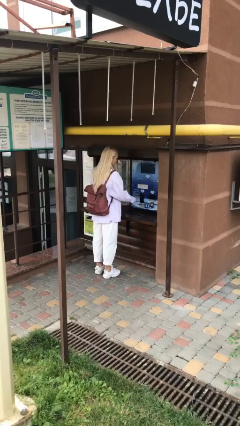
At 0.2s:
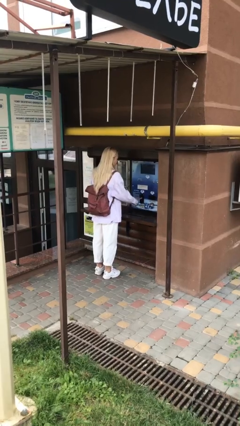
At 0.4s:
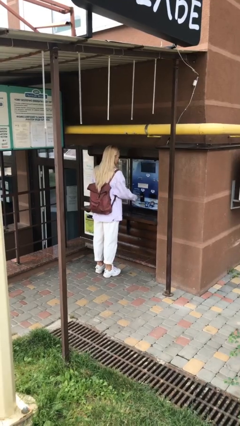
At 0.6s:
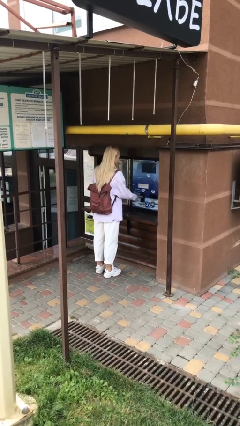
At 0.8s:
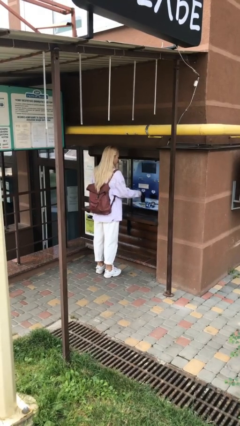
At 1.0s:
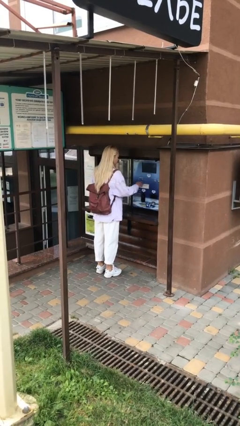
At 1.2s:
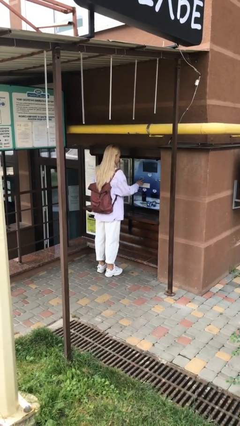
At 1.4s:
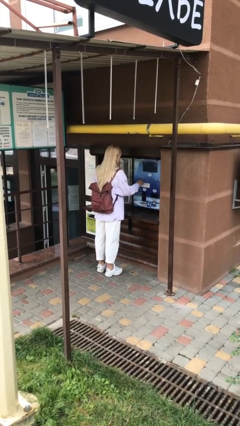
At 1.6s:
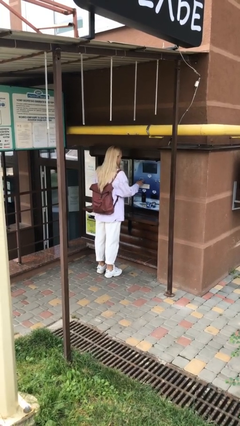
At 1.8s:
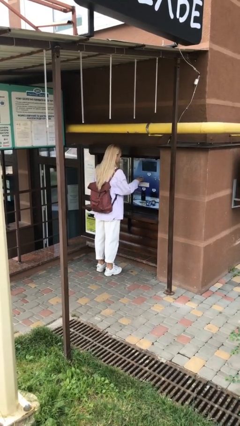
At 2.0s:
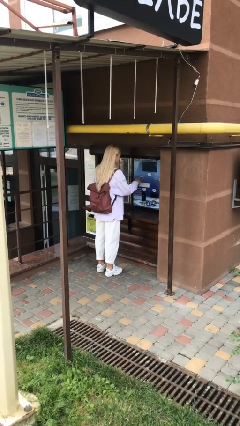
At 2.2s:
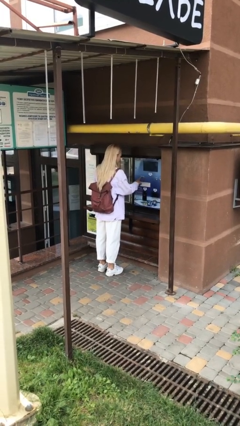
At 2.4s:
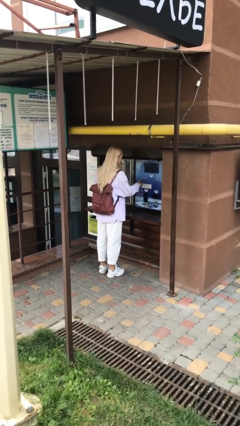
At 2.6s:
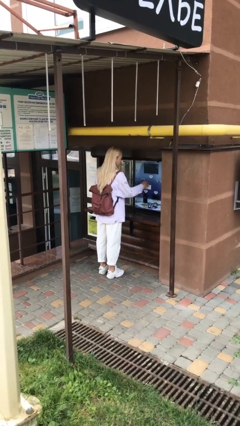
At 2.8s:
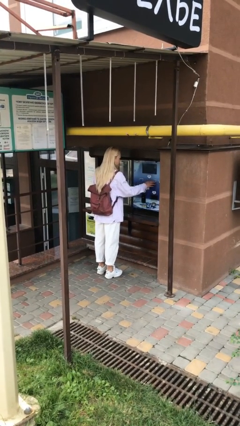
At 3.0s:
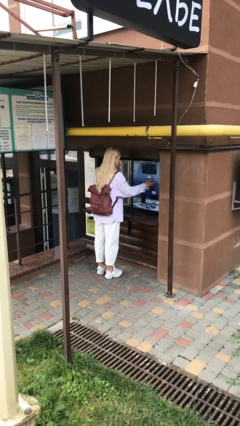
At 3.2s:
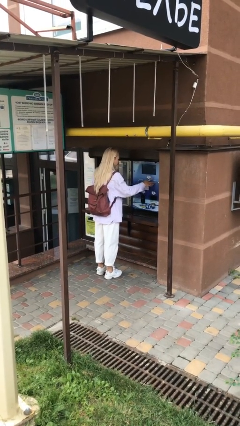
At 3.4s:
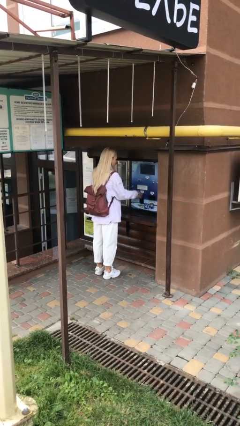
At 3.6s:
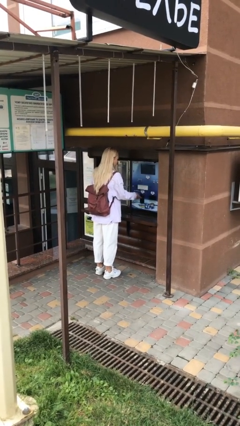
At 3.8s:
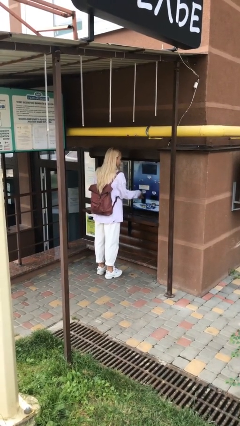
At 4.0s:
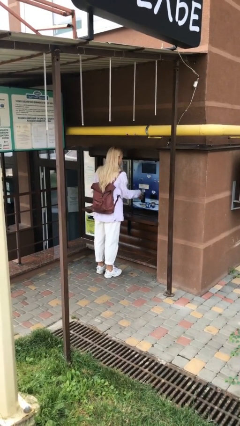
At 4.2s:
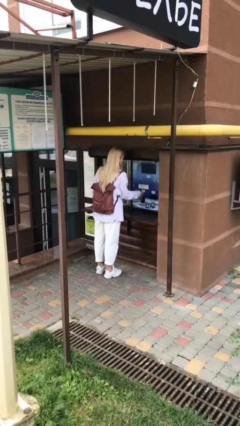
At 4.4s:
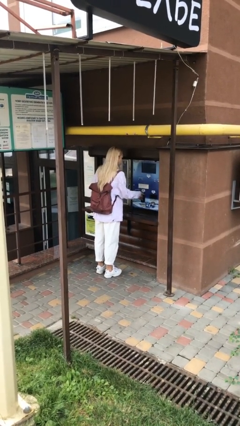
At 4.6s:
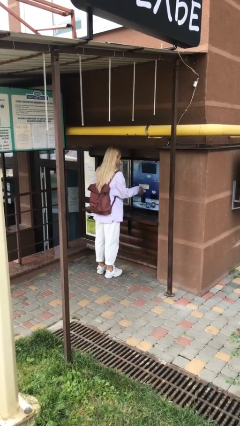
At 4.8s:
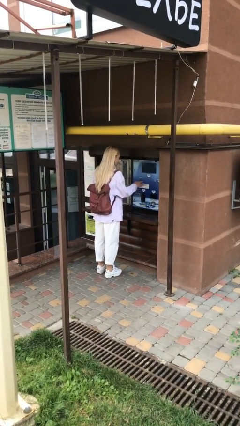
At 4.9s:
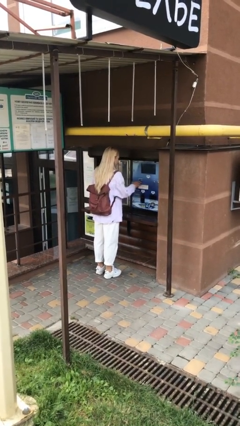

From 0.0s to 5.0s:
person purchases from machine

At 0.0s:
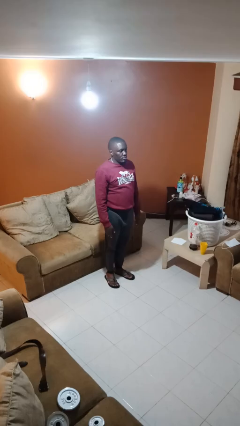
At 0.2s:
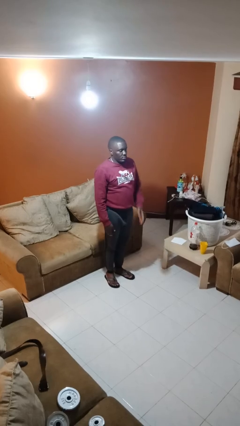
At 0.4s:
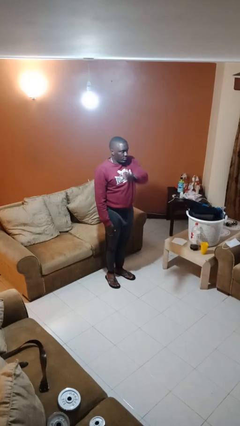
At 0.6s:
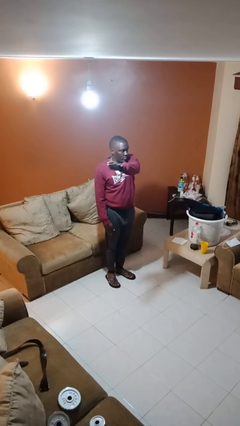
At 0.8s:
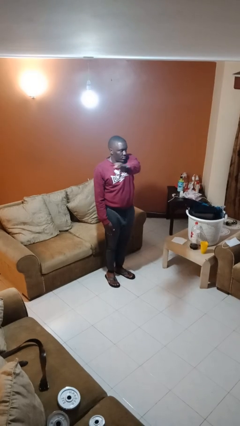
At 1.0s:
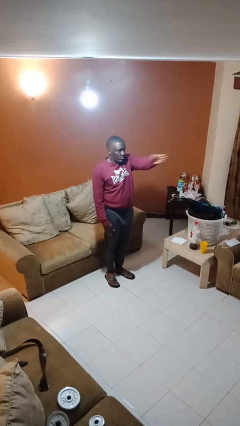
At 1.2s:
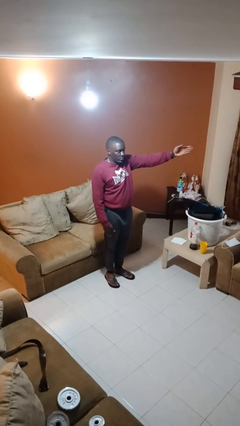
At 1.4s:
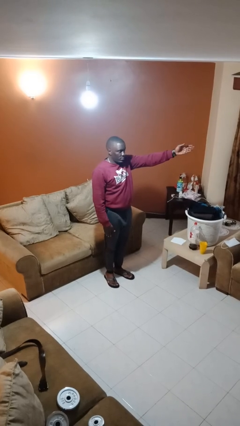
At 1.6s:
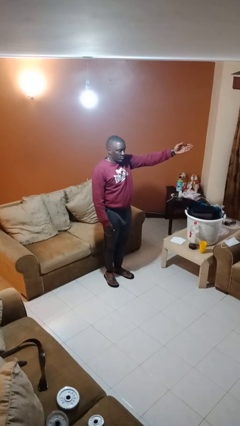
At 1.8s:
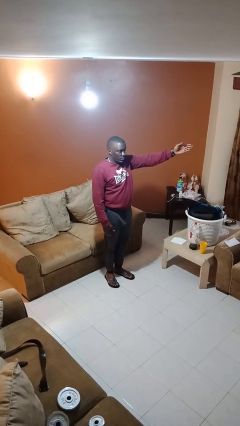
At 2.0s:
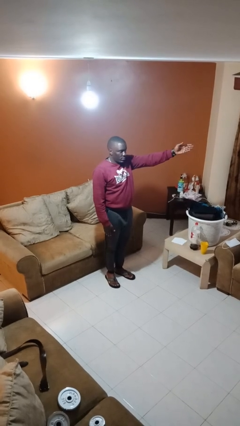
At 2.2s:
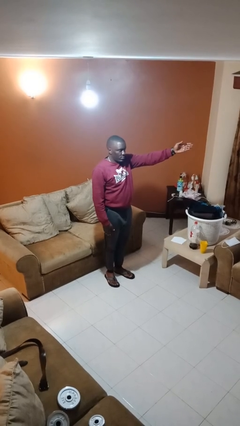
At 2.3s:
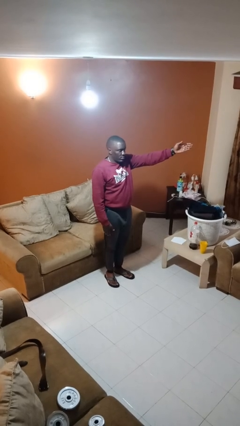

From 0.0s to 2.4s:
person gestures swipe left

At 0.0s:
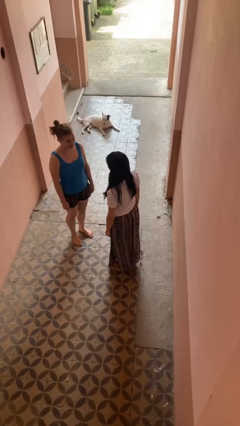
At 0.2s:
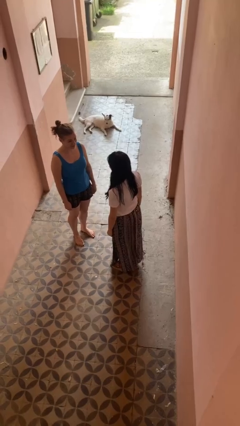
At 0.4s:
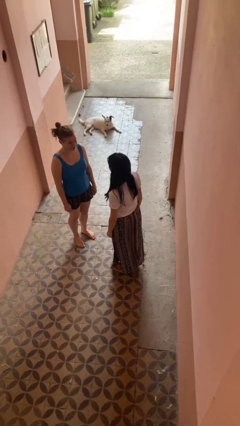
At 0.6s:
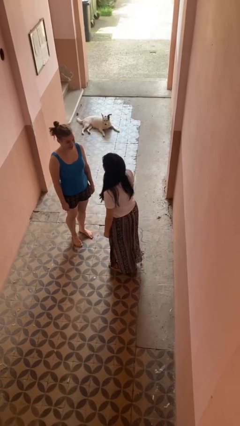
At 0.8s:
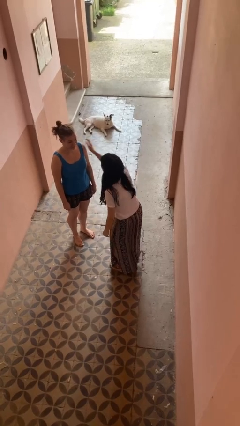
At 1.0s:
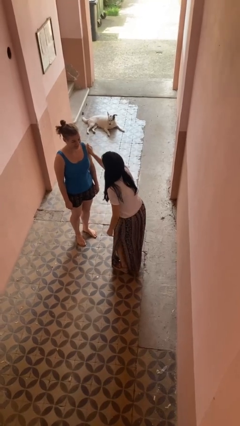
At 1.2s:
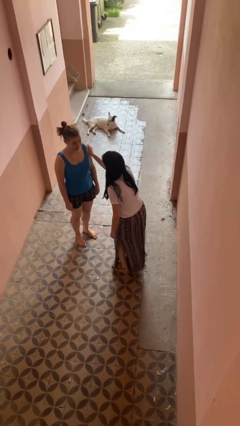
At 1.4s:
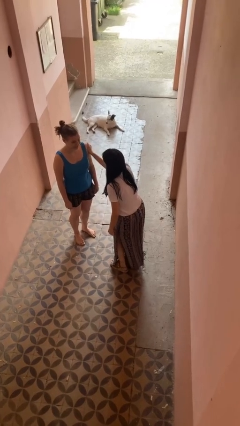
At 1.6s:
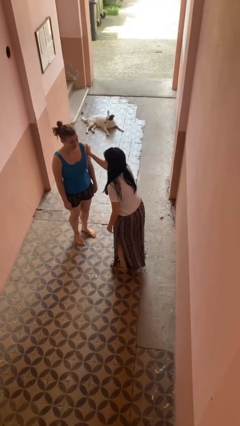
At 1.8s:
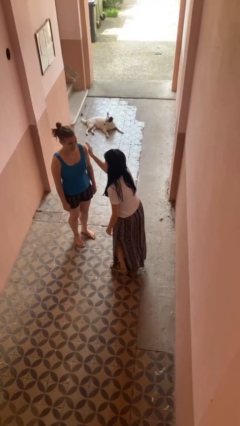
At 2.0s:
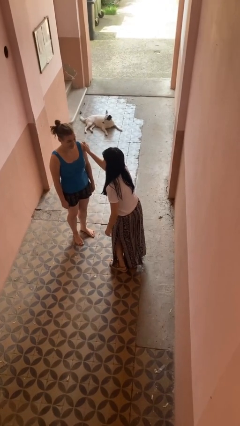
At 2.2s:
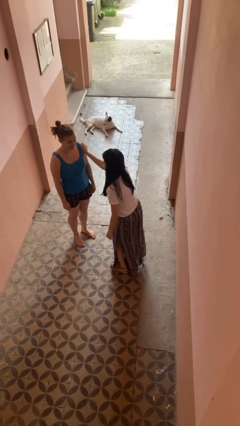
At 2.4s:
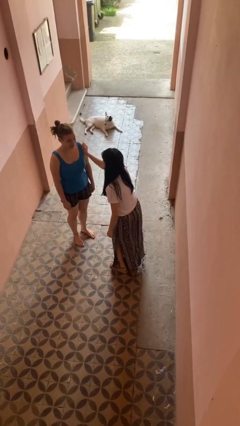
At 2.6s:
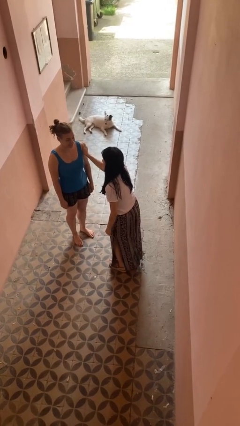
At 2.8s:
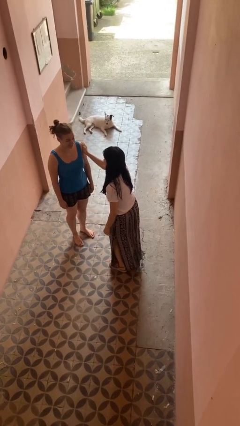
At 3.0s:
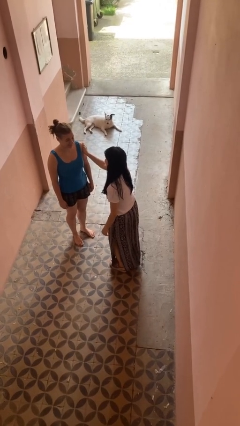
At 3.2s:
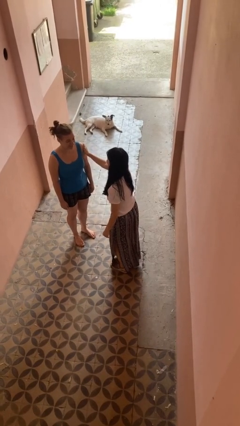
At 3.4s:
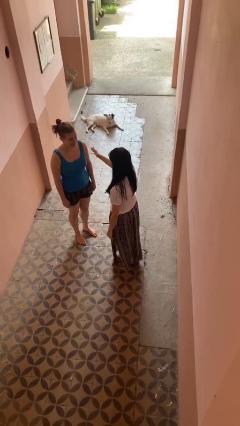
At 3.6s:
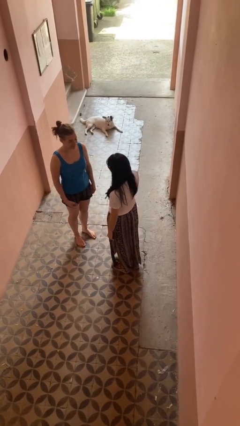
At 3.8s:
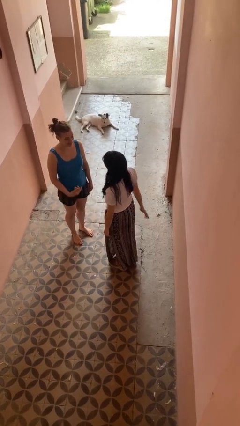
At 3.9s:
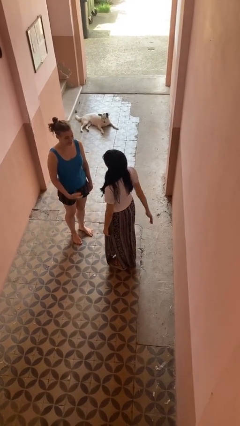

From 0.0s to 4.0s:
person pounds shoulders of person

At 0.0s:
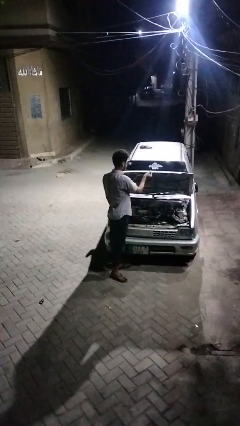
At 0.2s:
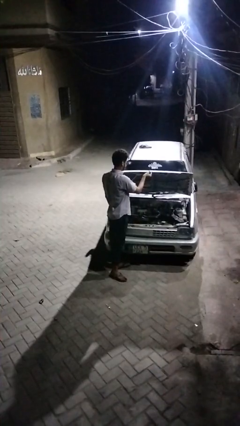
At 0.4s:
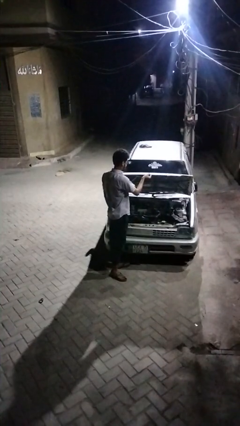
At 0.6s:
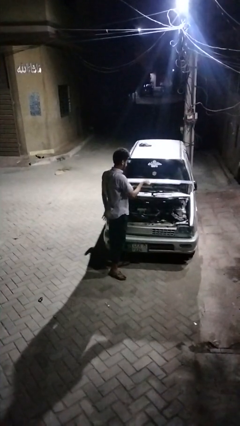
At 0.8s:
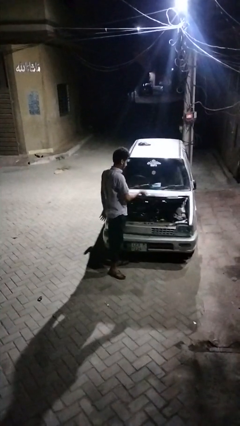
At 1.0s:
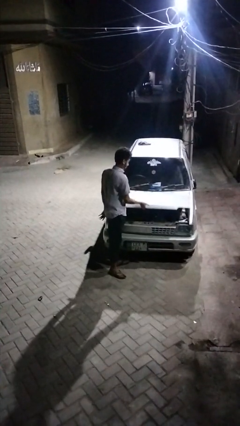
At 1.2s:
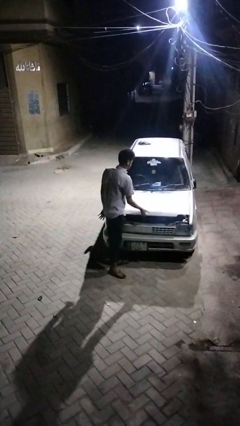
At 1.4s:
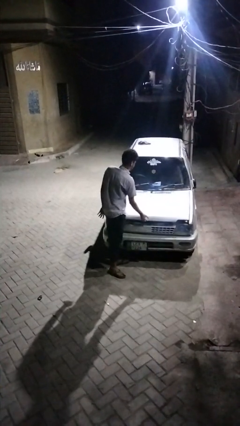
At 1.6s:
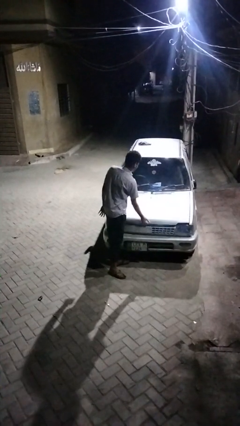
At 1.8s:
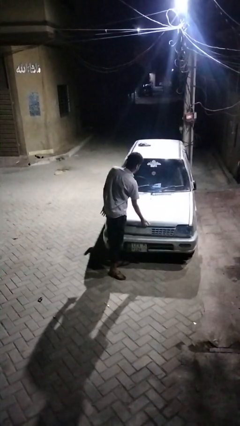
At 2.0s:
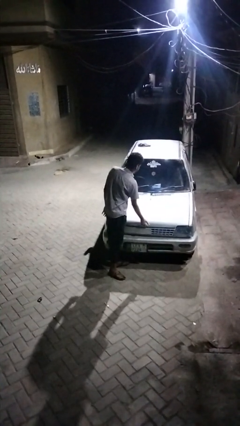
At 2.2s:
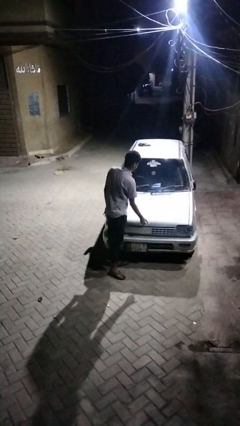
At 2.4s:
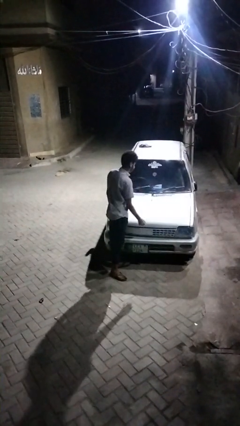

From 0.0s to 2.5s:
person closes car hood

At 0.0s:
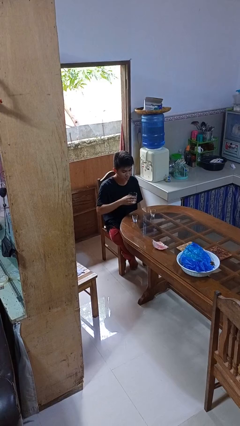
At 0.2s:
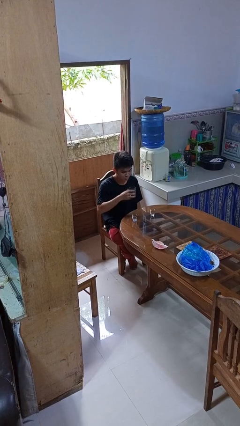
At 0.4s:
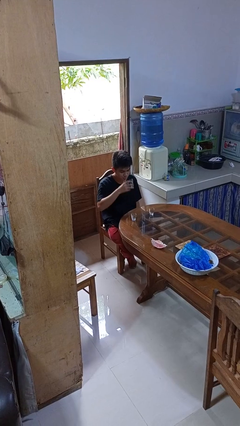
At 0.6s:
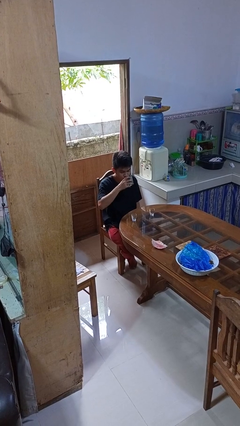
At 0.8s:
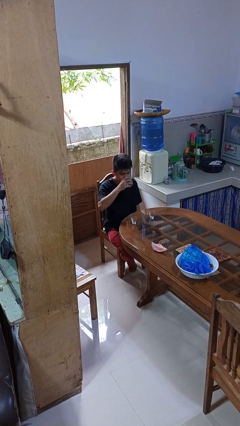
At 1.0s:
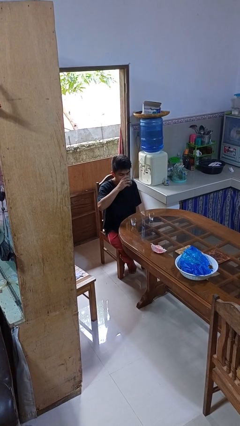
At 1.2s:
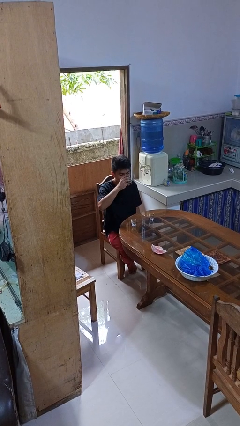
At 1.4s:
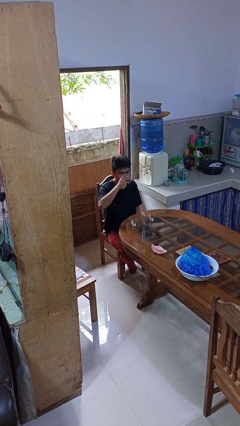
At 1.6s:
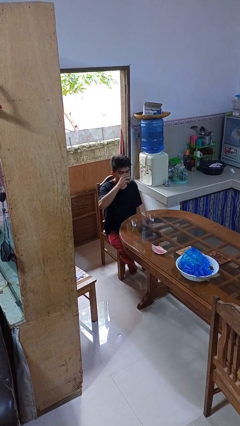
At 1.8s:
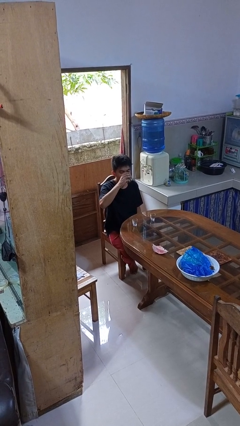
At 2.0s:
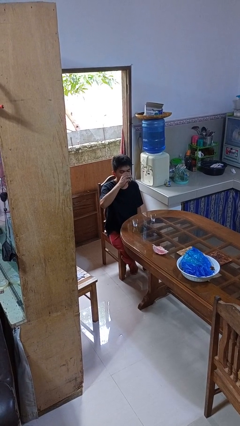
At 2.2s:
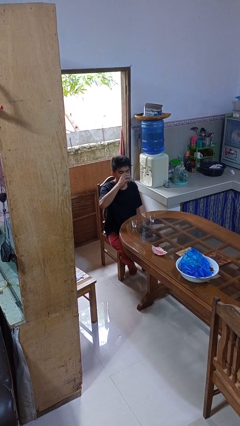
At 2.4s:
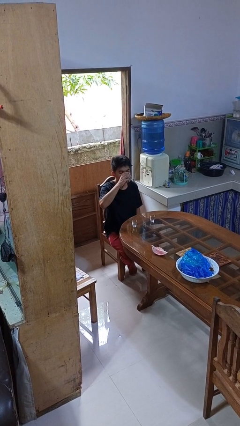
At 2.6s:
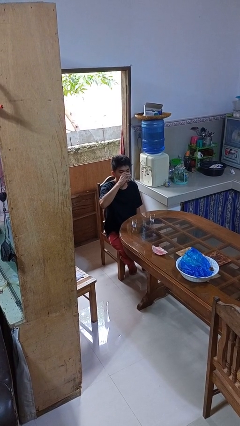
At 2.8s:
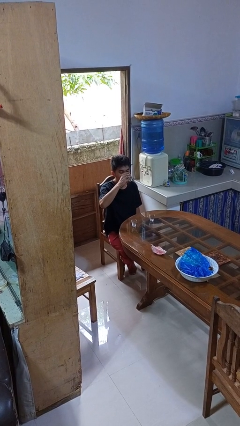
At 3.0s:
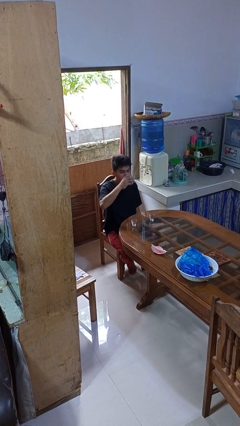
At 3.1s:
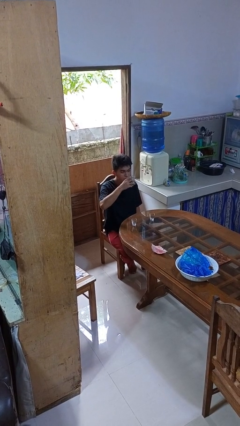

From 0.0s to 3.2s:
person drinks from shotglass

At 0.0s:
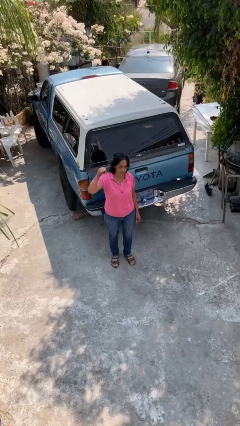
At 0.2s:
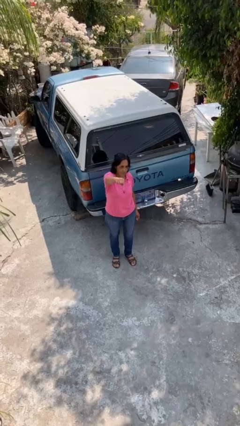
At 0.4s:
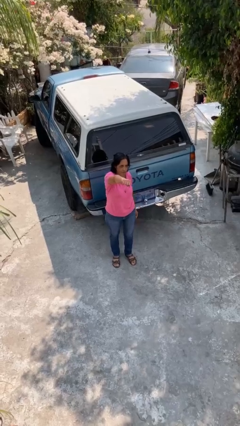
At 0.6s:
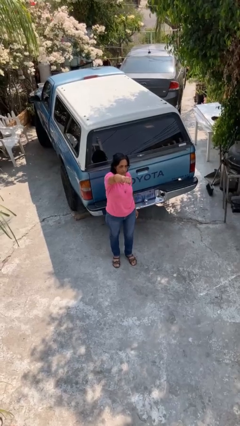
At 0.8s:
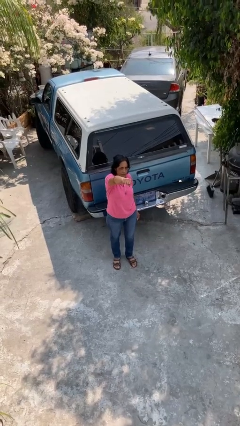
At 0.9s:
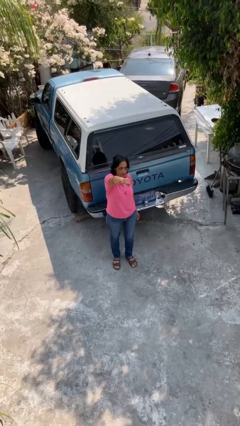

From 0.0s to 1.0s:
person karate chop
